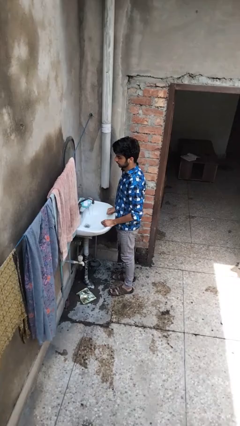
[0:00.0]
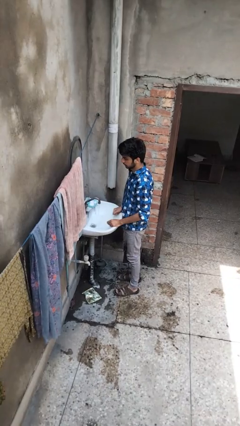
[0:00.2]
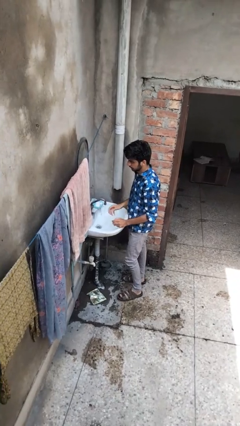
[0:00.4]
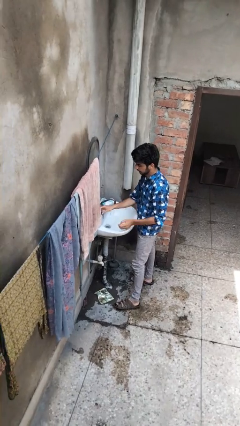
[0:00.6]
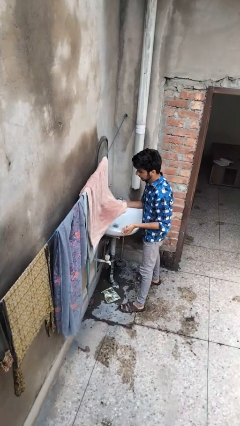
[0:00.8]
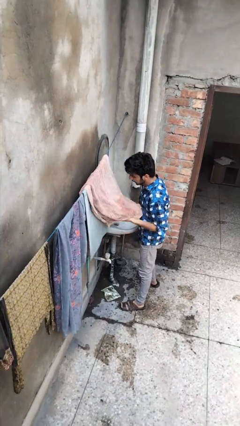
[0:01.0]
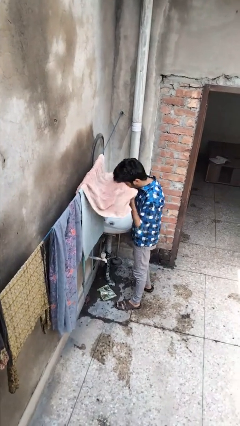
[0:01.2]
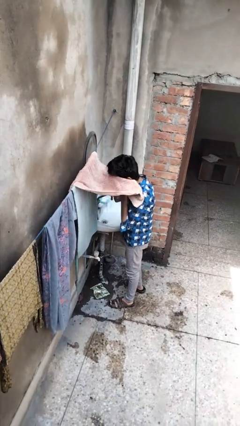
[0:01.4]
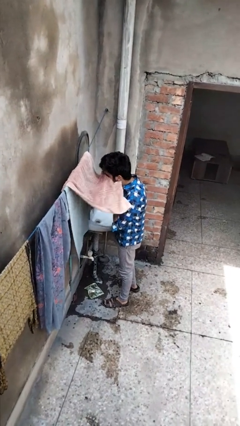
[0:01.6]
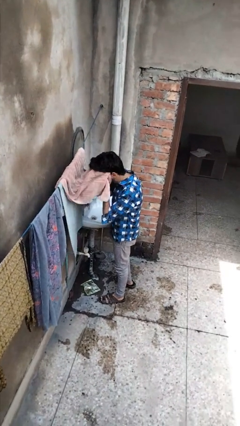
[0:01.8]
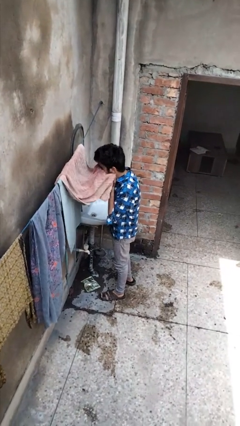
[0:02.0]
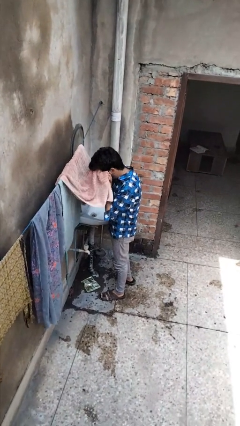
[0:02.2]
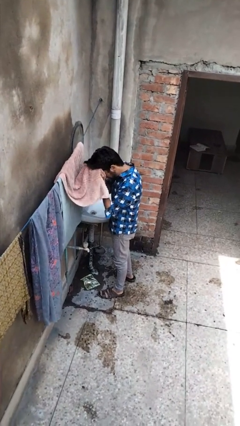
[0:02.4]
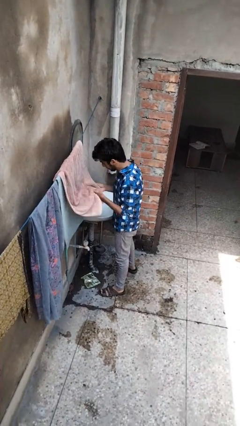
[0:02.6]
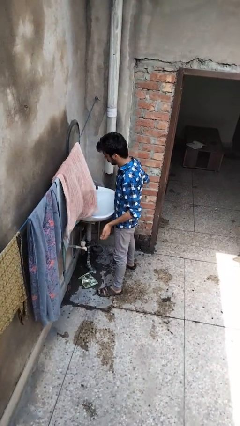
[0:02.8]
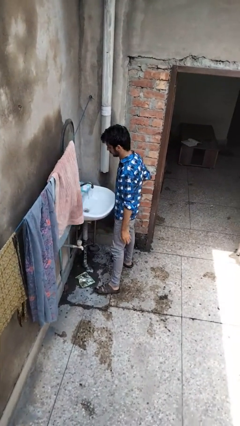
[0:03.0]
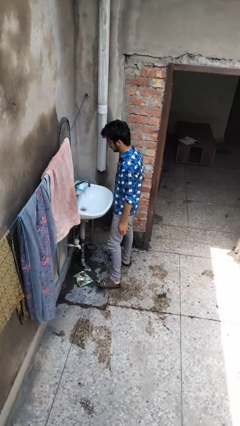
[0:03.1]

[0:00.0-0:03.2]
person dries face with towel

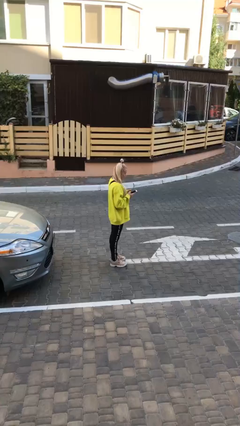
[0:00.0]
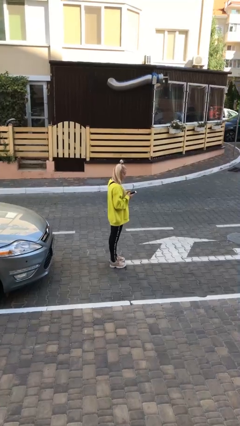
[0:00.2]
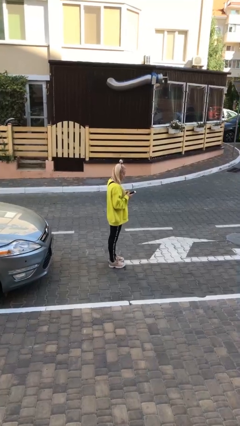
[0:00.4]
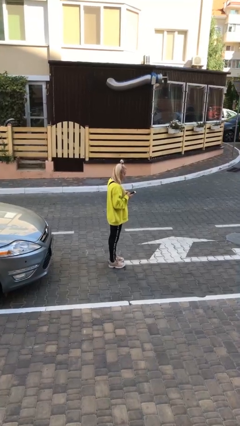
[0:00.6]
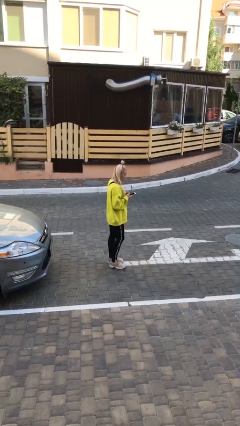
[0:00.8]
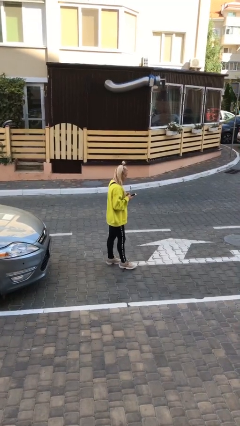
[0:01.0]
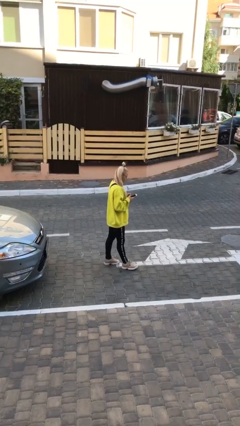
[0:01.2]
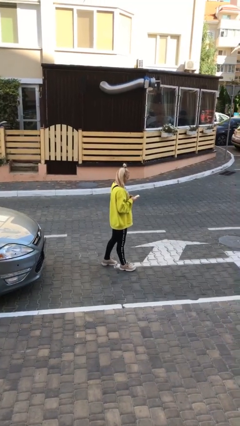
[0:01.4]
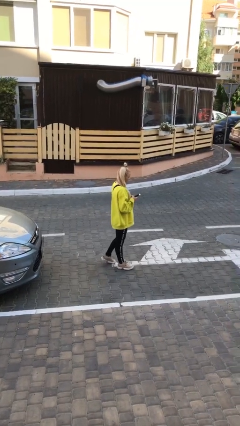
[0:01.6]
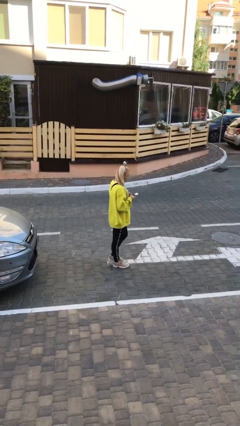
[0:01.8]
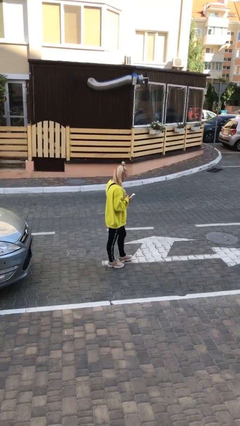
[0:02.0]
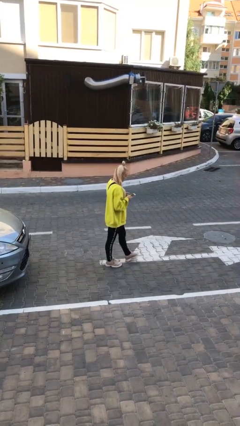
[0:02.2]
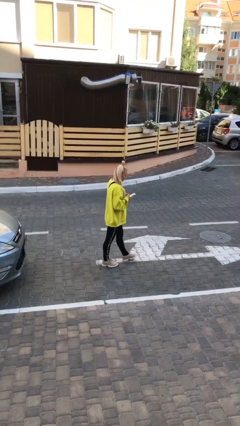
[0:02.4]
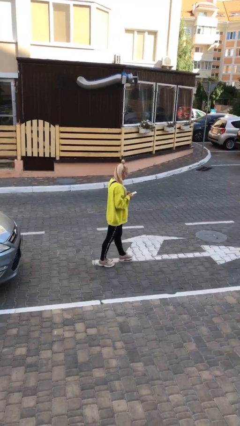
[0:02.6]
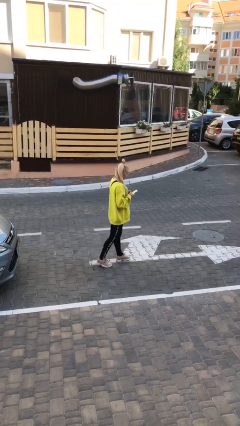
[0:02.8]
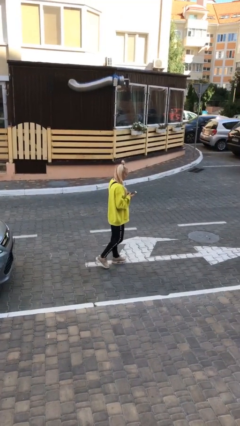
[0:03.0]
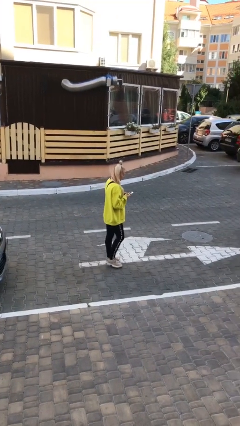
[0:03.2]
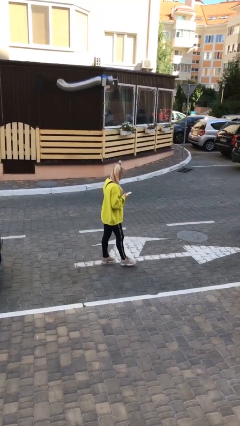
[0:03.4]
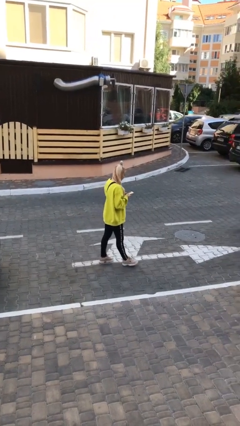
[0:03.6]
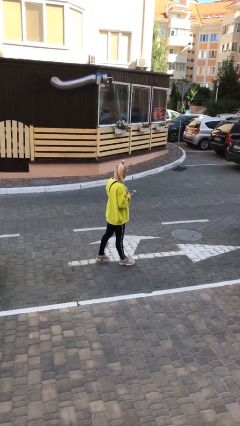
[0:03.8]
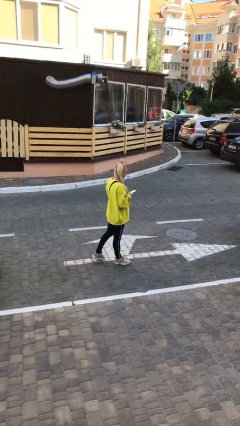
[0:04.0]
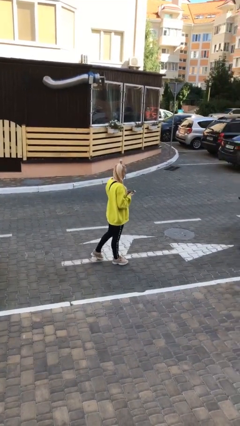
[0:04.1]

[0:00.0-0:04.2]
person texts on phone

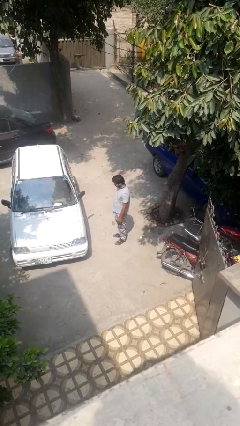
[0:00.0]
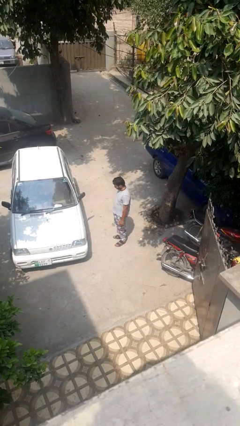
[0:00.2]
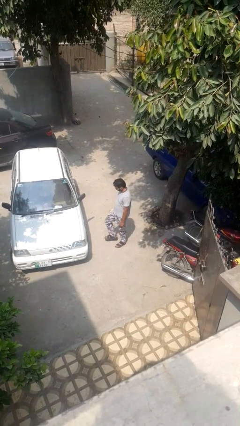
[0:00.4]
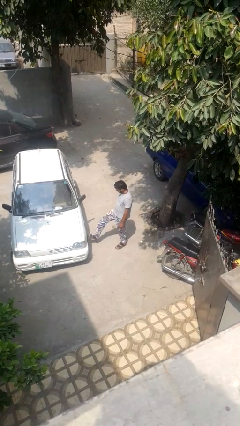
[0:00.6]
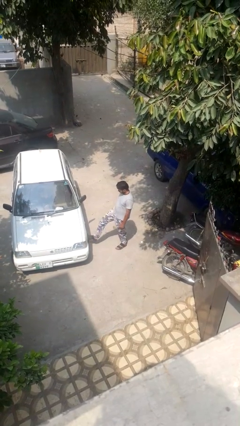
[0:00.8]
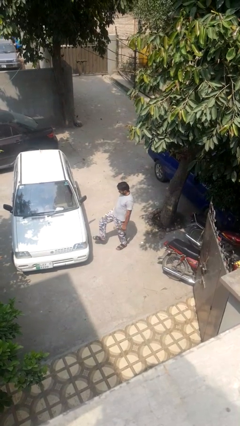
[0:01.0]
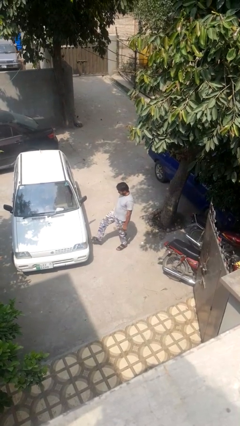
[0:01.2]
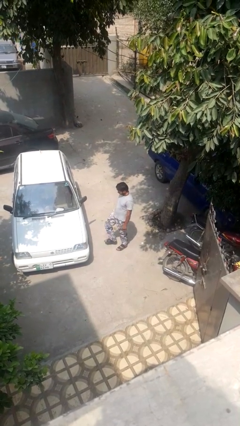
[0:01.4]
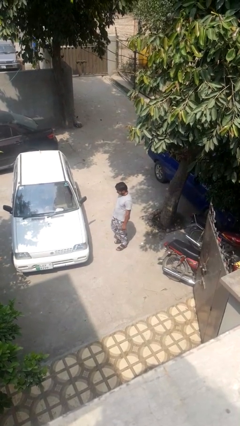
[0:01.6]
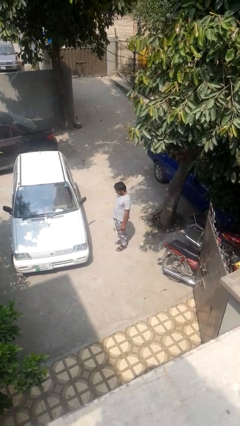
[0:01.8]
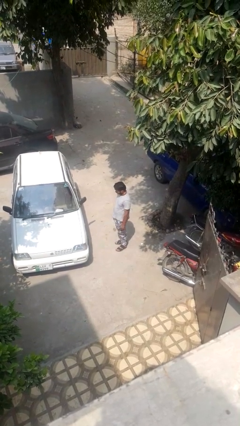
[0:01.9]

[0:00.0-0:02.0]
person kicks car tires

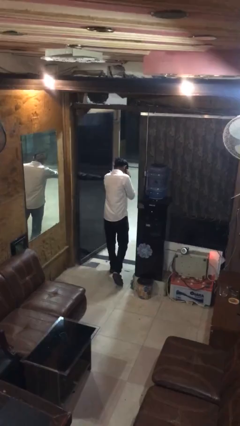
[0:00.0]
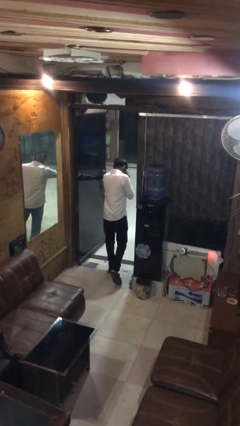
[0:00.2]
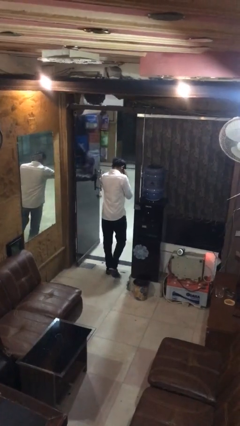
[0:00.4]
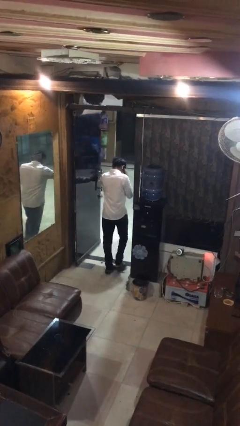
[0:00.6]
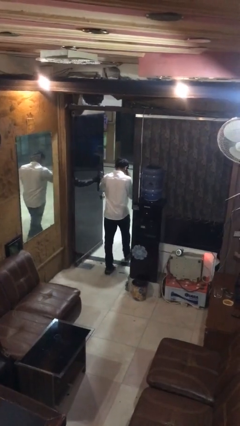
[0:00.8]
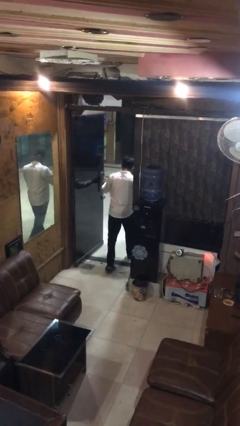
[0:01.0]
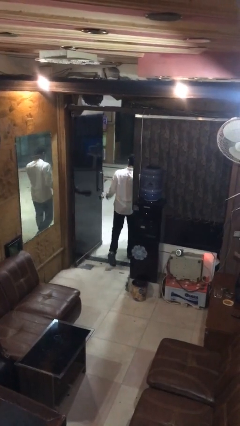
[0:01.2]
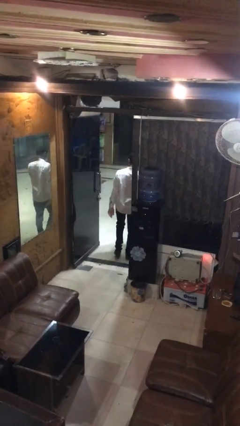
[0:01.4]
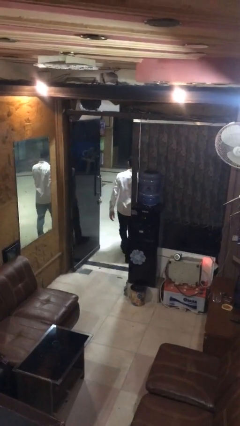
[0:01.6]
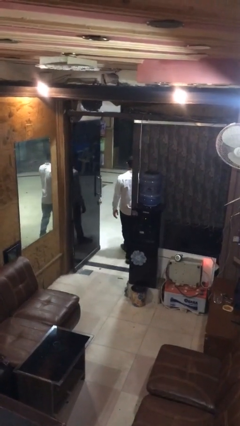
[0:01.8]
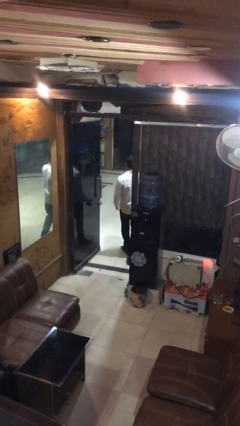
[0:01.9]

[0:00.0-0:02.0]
person exits scene through structure

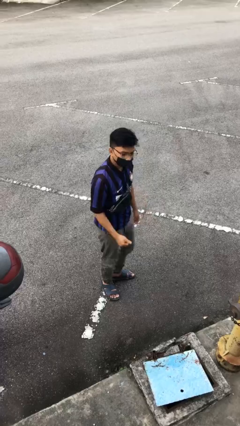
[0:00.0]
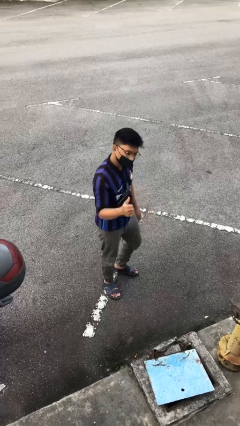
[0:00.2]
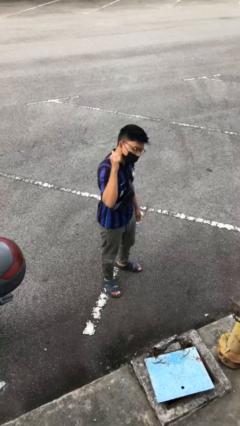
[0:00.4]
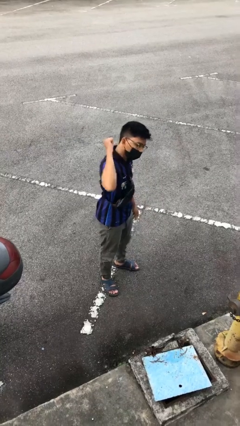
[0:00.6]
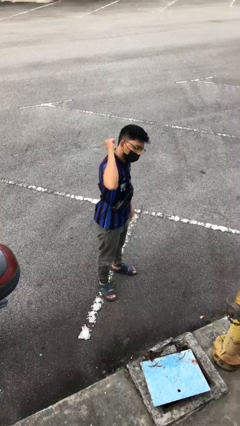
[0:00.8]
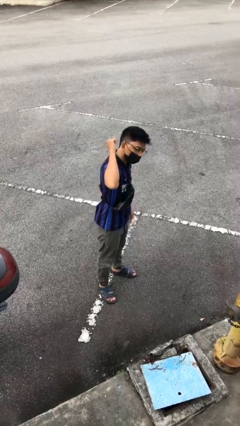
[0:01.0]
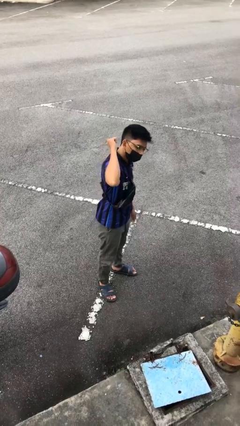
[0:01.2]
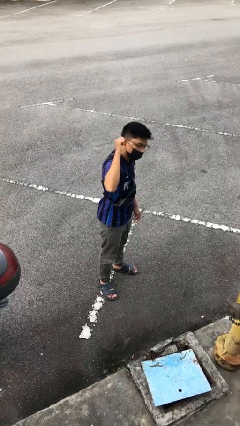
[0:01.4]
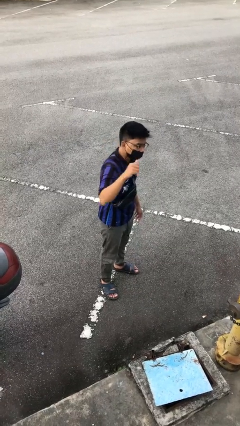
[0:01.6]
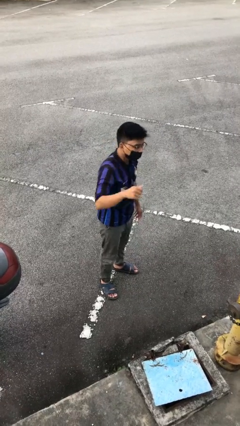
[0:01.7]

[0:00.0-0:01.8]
person gestures behind me

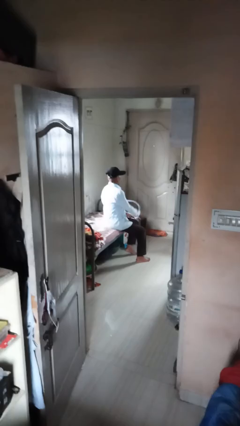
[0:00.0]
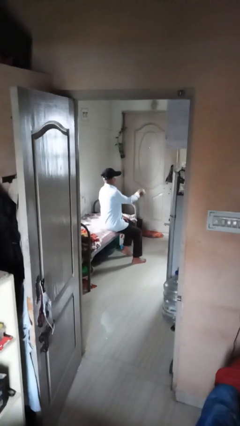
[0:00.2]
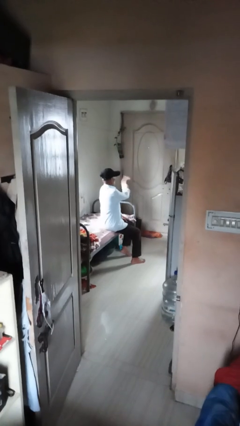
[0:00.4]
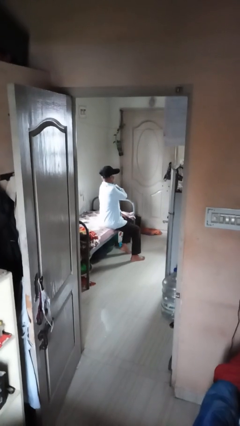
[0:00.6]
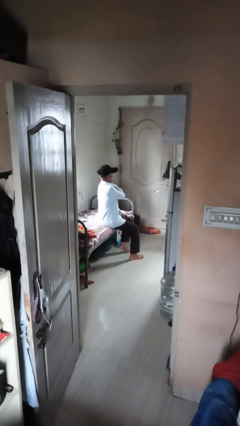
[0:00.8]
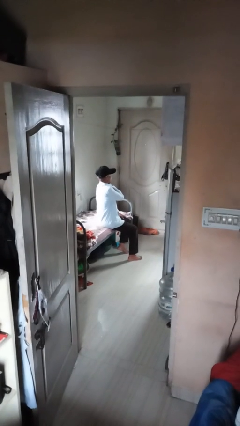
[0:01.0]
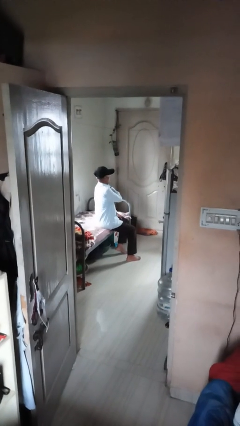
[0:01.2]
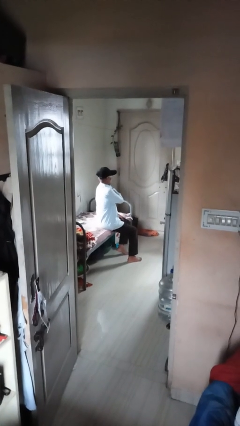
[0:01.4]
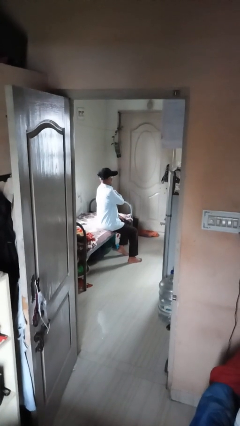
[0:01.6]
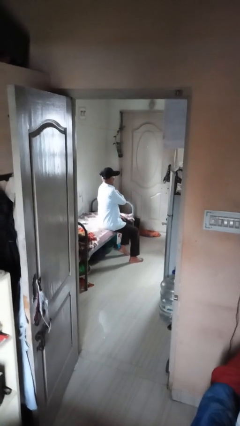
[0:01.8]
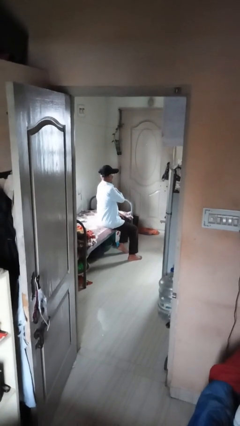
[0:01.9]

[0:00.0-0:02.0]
person swats bug

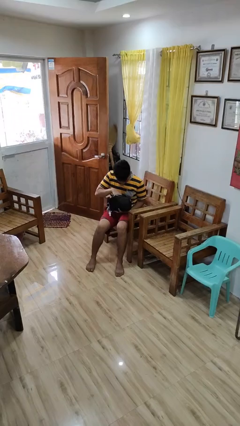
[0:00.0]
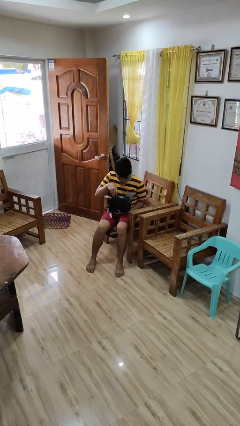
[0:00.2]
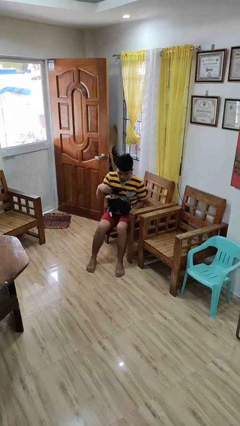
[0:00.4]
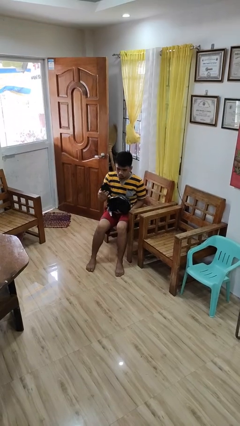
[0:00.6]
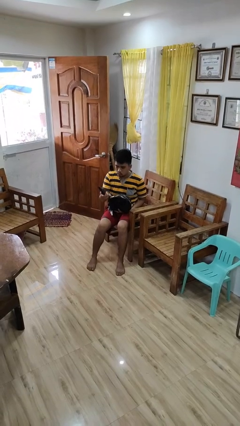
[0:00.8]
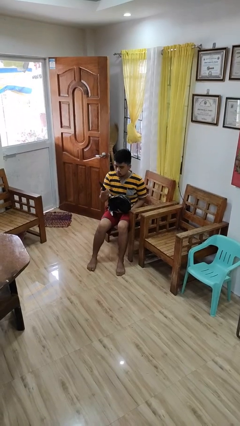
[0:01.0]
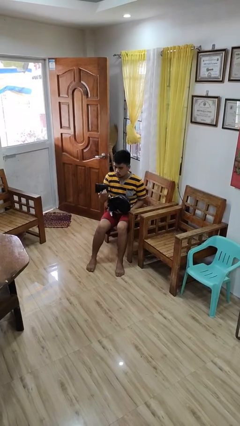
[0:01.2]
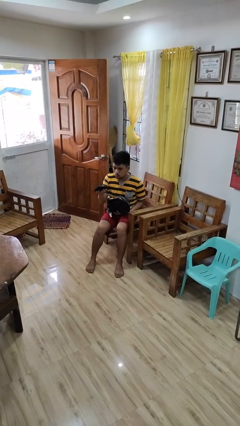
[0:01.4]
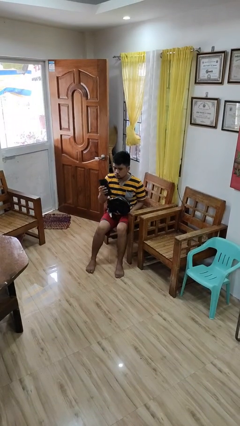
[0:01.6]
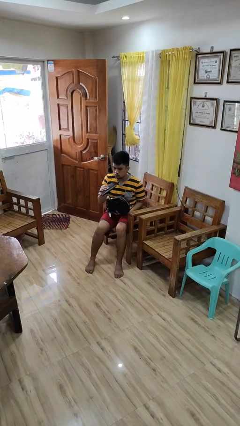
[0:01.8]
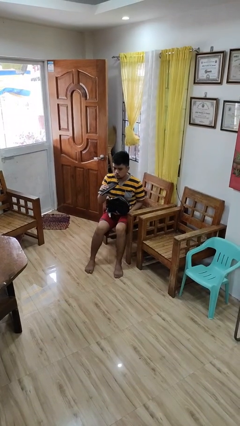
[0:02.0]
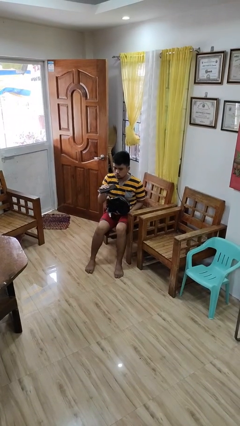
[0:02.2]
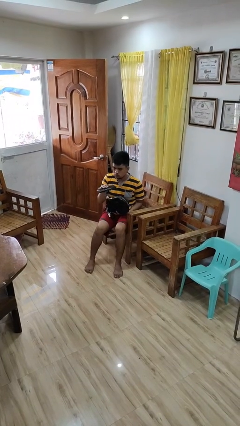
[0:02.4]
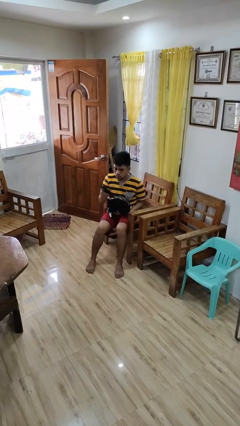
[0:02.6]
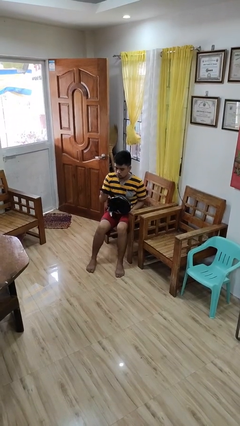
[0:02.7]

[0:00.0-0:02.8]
person takes object from purse
